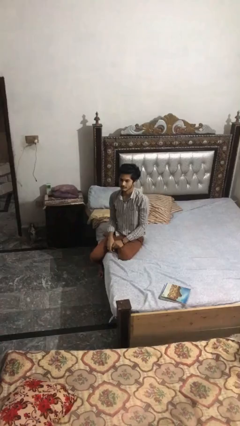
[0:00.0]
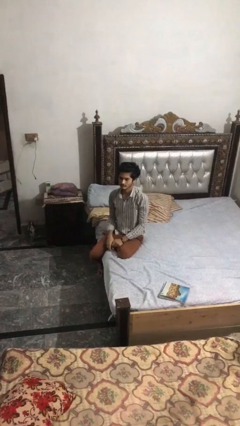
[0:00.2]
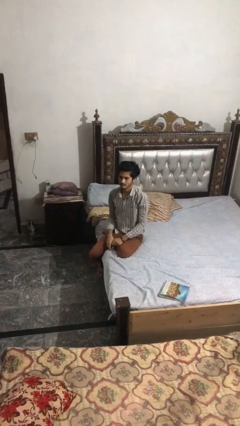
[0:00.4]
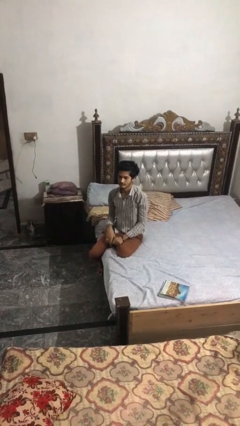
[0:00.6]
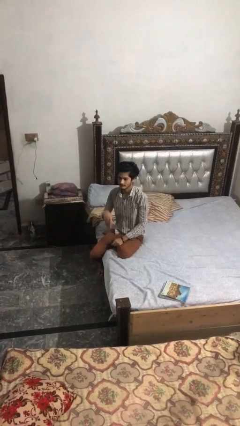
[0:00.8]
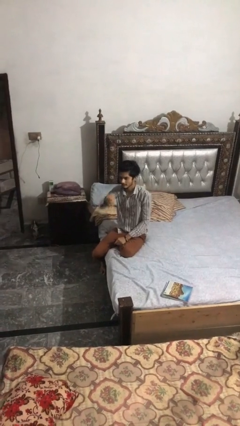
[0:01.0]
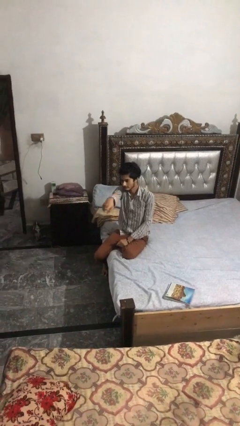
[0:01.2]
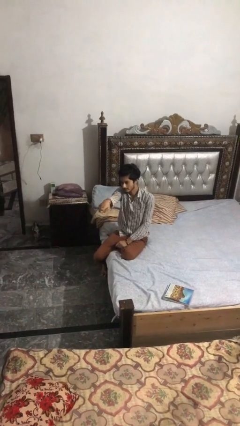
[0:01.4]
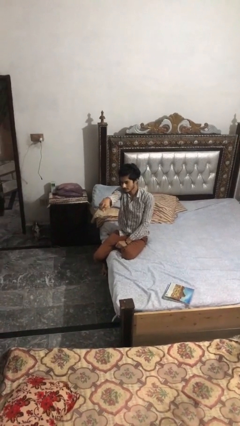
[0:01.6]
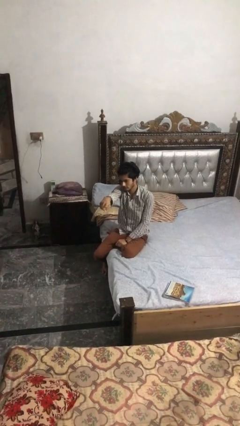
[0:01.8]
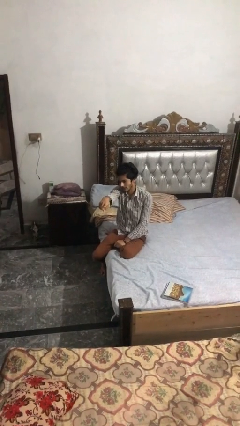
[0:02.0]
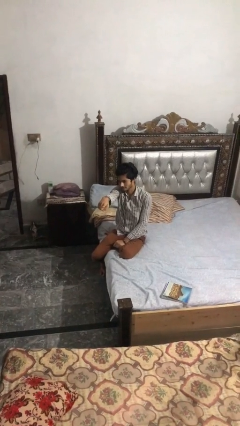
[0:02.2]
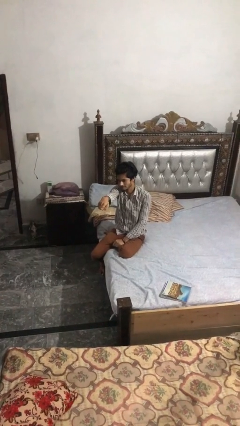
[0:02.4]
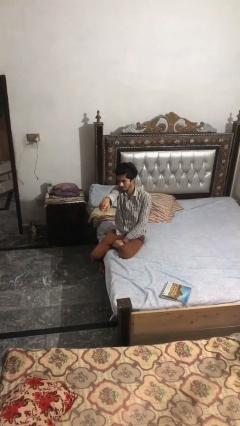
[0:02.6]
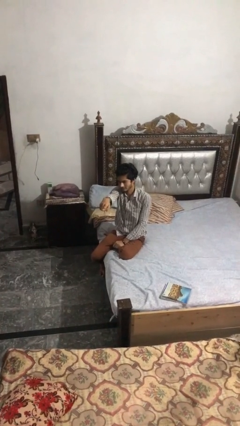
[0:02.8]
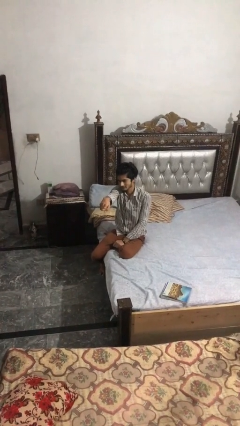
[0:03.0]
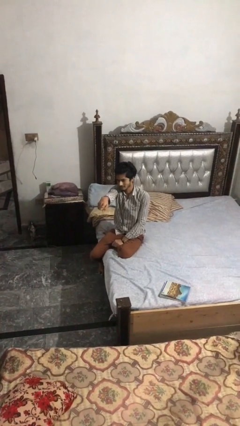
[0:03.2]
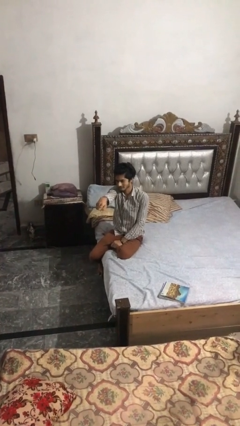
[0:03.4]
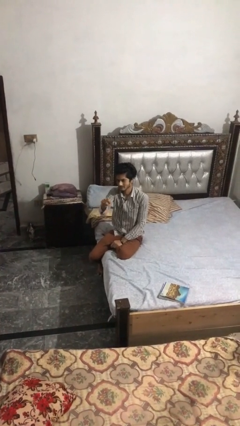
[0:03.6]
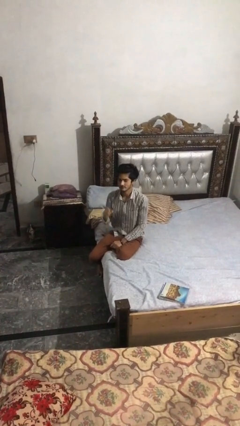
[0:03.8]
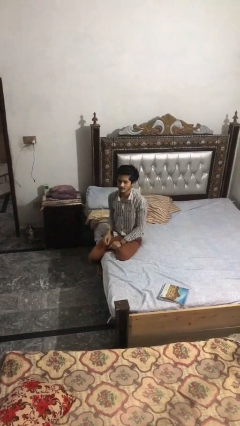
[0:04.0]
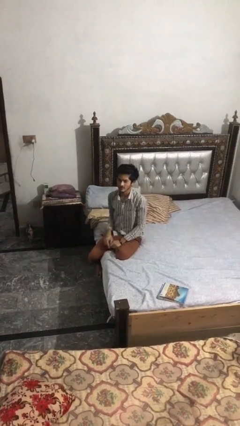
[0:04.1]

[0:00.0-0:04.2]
person points at person

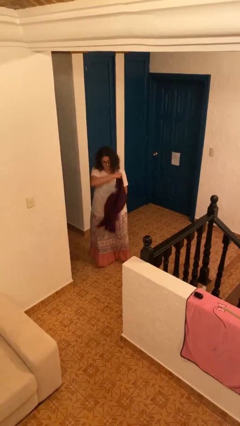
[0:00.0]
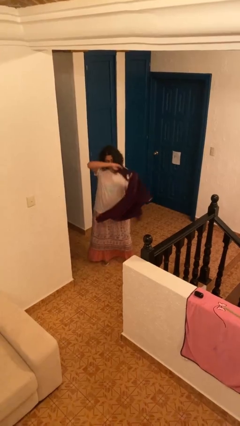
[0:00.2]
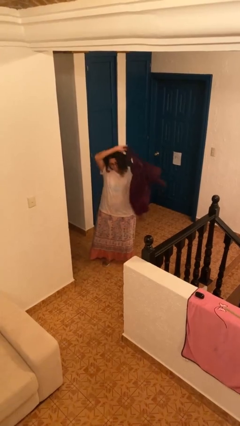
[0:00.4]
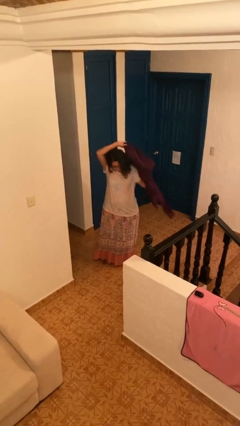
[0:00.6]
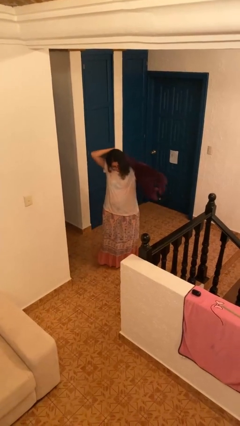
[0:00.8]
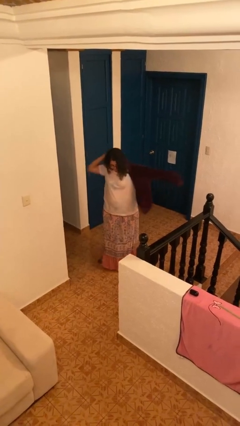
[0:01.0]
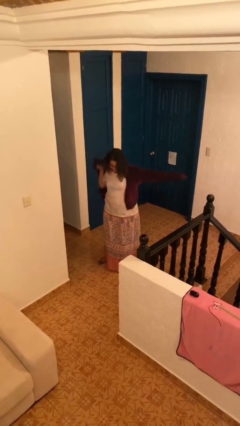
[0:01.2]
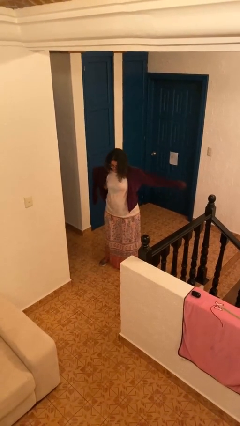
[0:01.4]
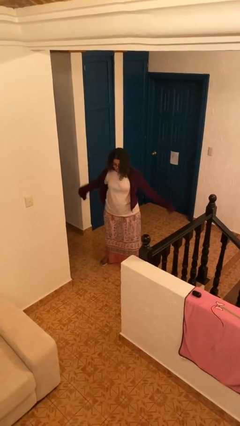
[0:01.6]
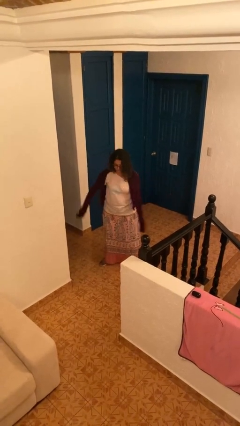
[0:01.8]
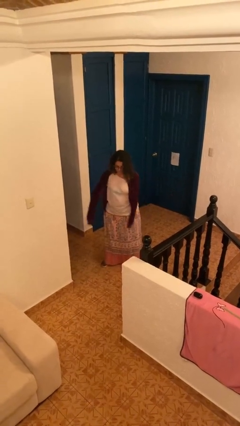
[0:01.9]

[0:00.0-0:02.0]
person puts on jacket

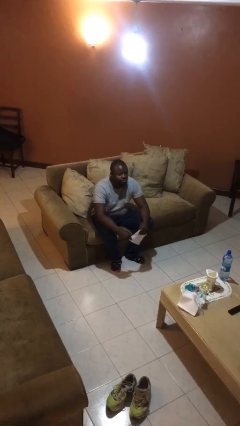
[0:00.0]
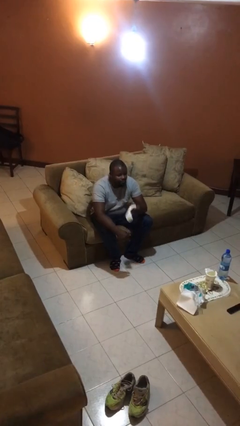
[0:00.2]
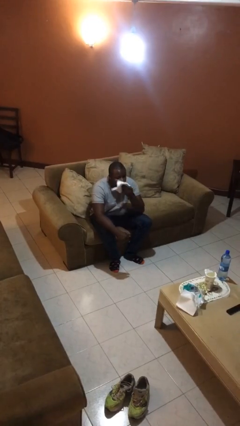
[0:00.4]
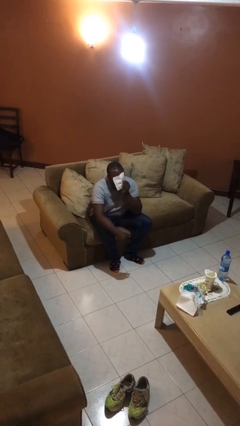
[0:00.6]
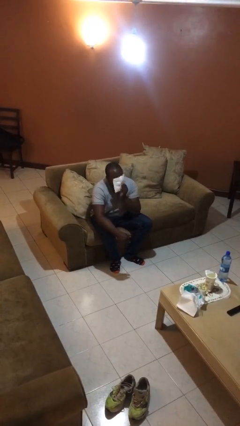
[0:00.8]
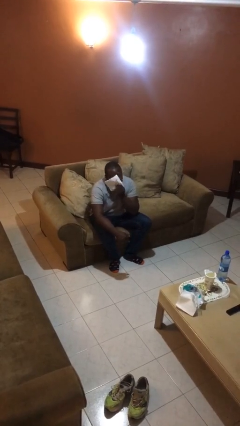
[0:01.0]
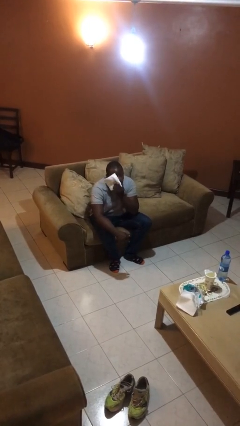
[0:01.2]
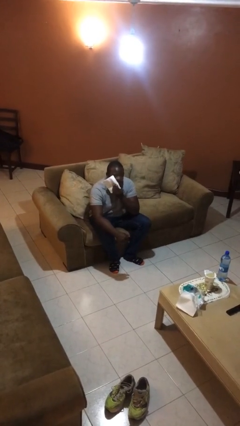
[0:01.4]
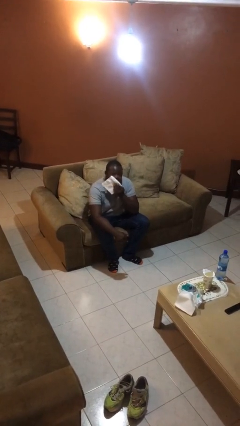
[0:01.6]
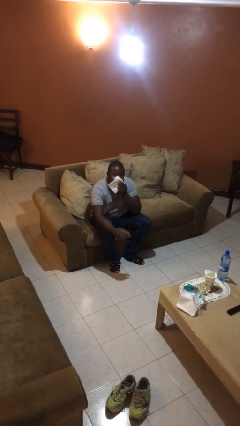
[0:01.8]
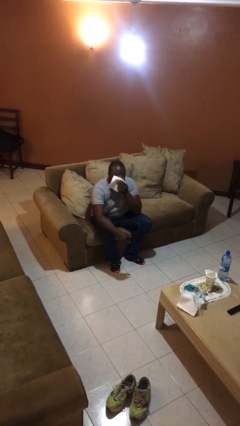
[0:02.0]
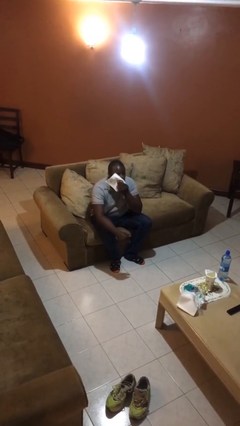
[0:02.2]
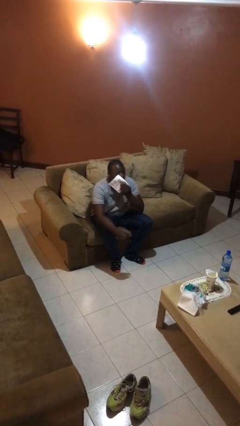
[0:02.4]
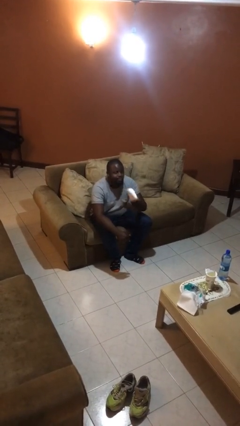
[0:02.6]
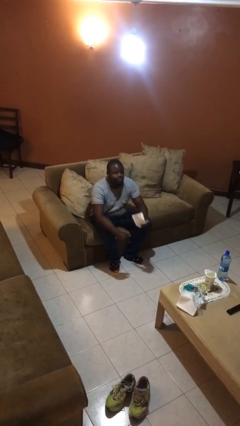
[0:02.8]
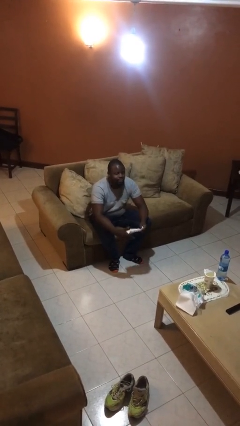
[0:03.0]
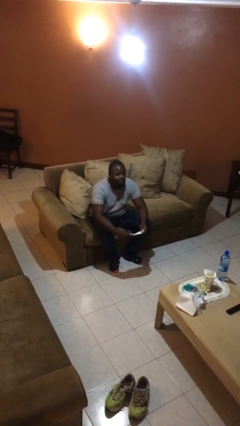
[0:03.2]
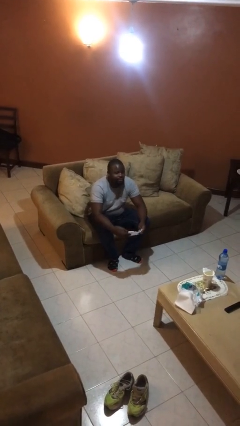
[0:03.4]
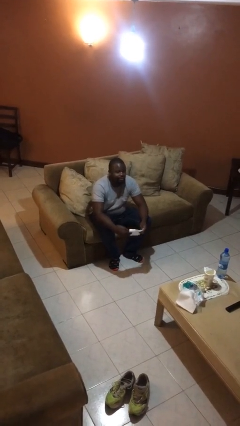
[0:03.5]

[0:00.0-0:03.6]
person wipes mouth with napkin

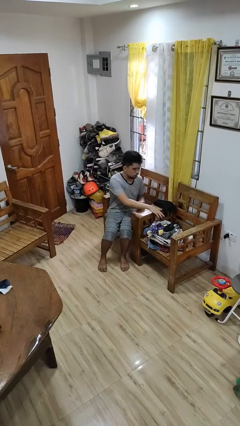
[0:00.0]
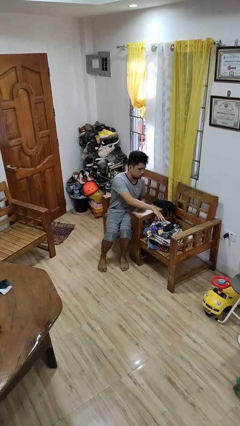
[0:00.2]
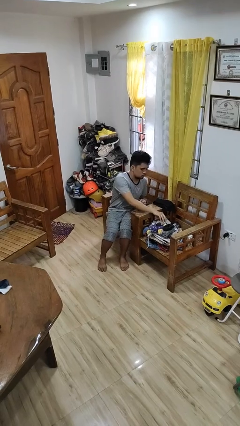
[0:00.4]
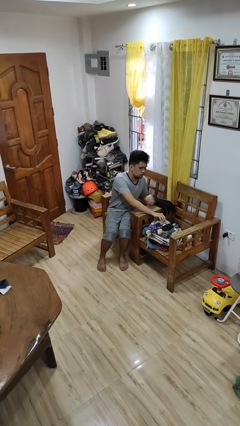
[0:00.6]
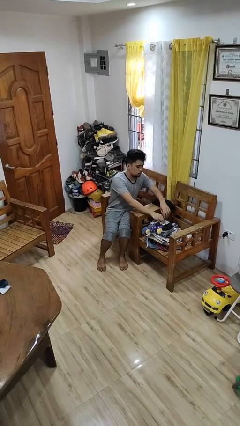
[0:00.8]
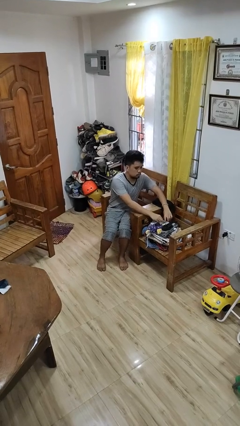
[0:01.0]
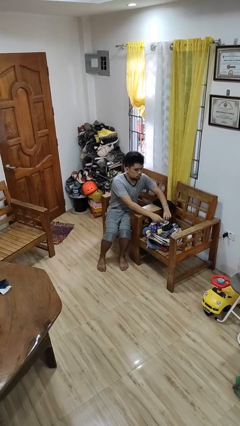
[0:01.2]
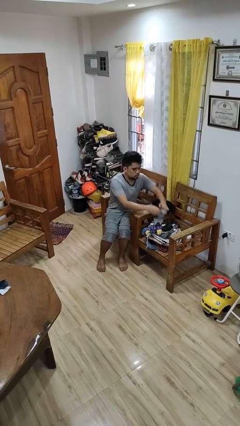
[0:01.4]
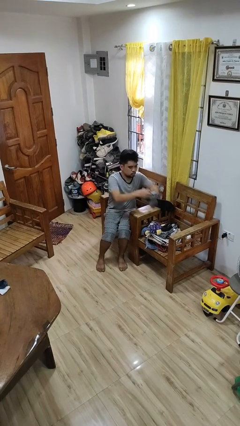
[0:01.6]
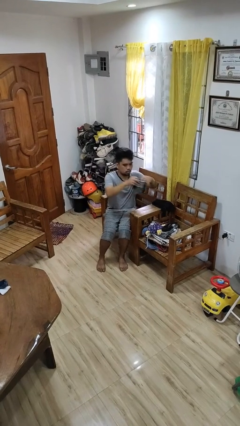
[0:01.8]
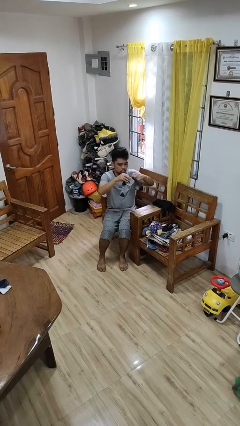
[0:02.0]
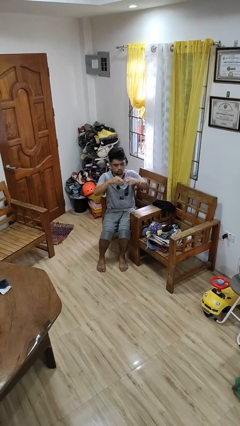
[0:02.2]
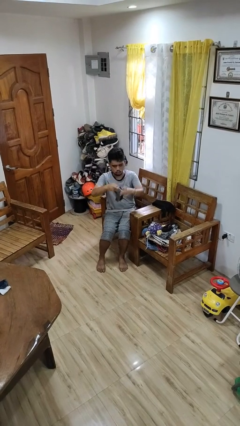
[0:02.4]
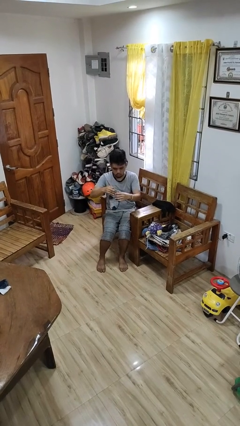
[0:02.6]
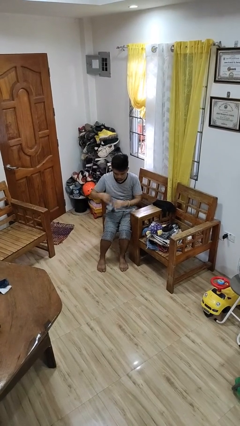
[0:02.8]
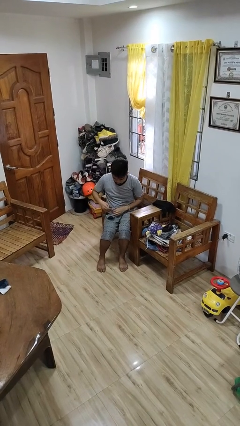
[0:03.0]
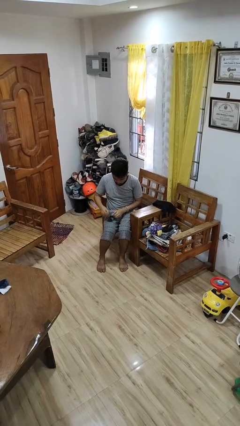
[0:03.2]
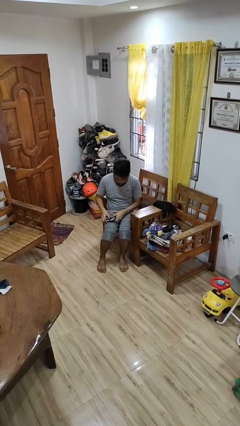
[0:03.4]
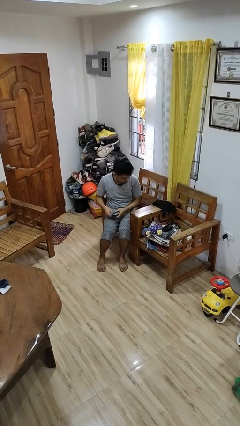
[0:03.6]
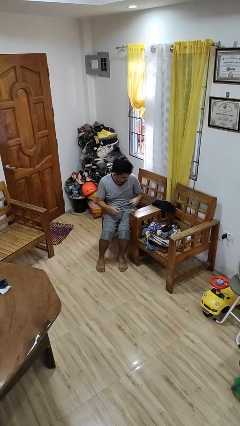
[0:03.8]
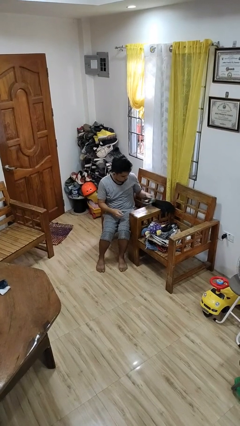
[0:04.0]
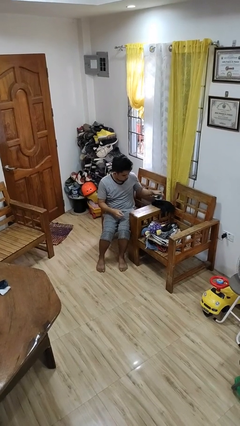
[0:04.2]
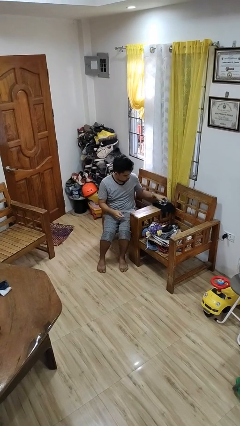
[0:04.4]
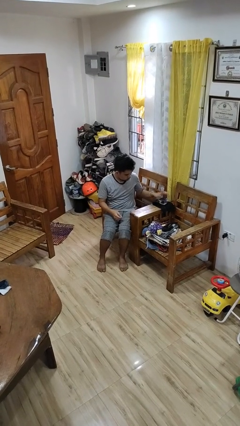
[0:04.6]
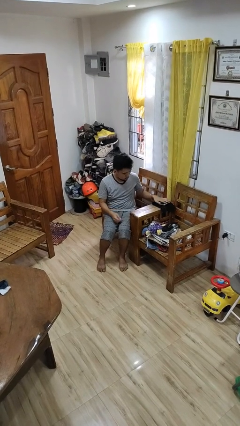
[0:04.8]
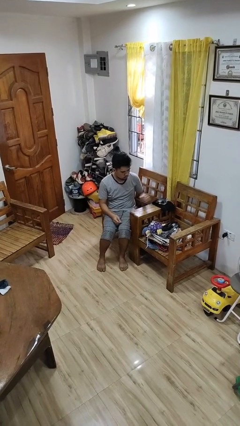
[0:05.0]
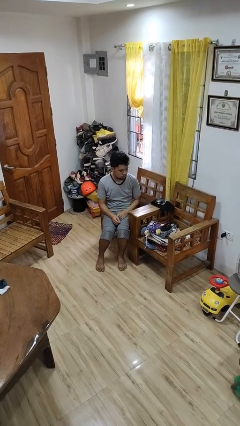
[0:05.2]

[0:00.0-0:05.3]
person folds socks

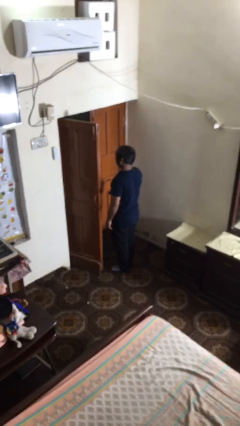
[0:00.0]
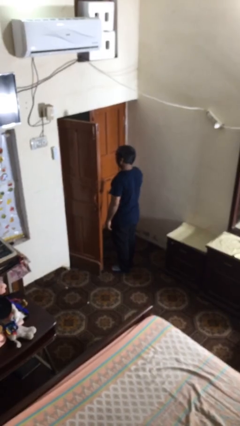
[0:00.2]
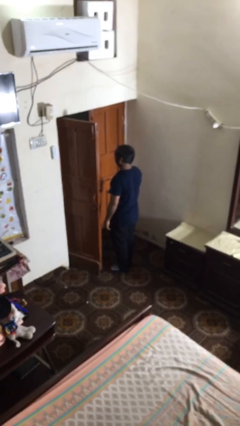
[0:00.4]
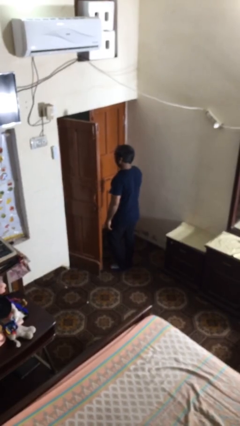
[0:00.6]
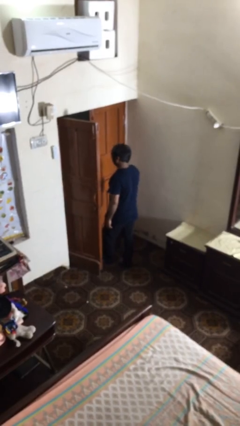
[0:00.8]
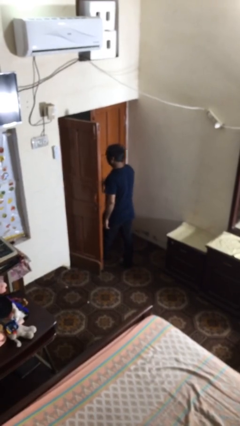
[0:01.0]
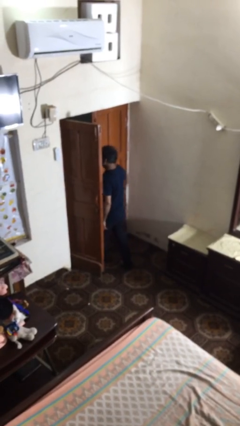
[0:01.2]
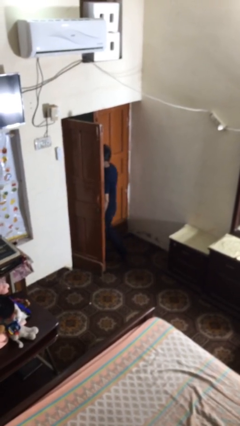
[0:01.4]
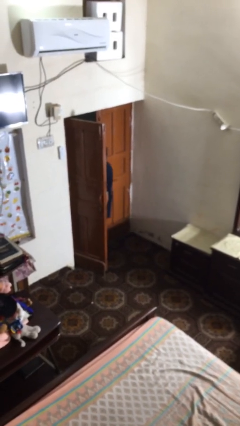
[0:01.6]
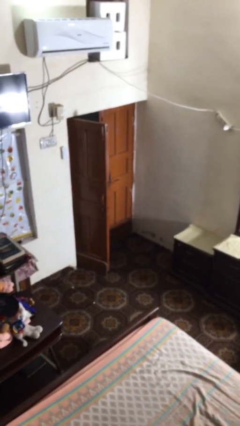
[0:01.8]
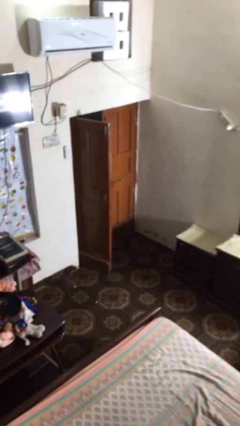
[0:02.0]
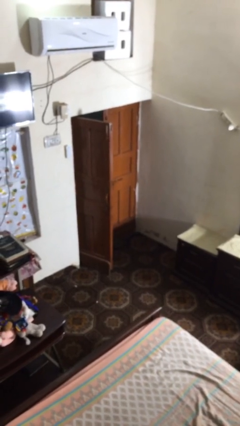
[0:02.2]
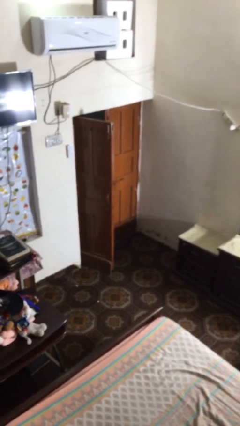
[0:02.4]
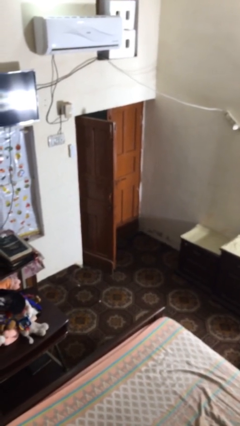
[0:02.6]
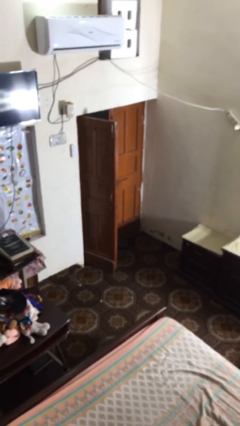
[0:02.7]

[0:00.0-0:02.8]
person exits scene through structure
